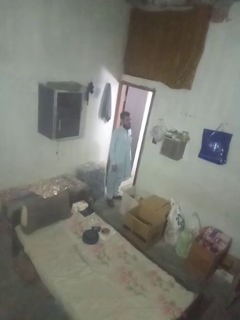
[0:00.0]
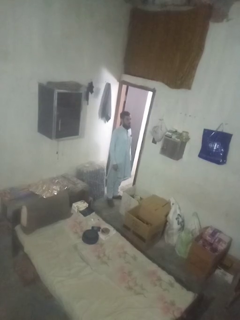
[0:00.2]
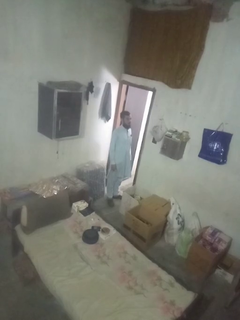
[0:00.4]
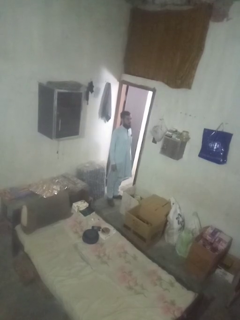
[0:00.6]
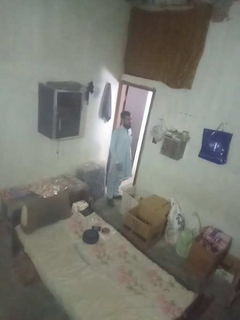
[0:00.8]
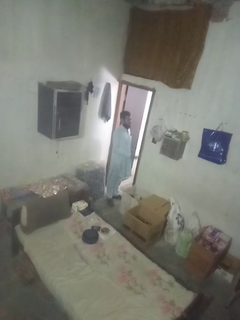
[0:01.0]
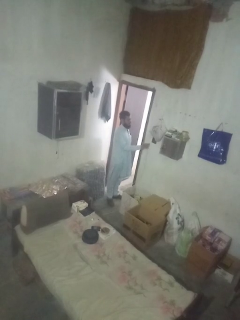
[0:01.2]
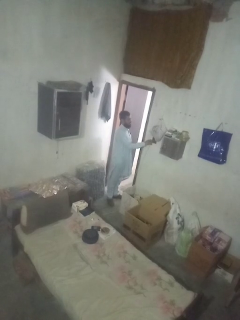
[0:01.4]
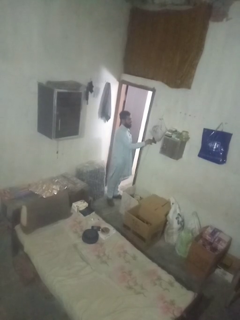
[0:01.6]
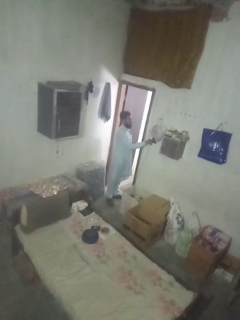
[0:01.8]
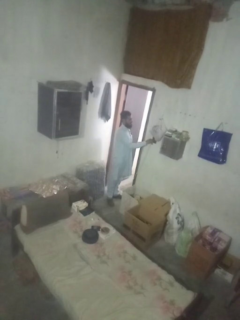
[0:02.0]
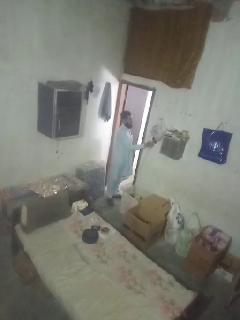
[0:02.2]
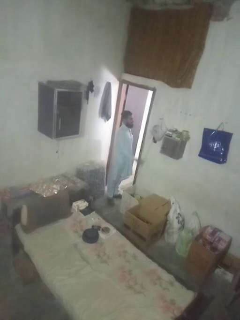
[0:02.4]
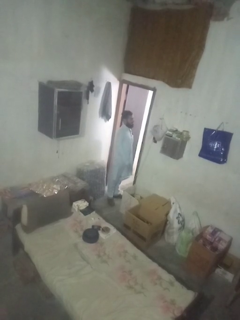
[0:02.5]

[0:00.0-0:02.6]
person plugs into electrical socket

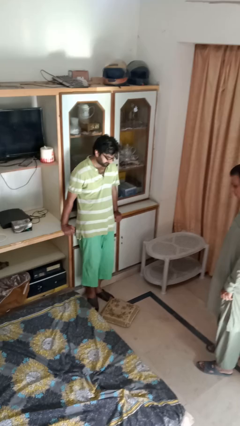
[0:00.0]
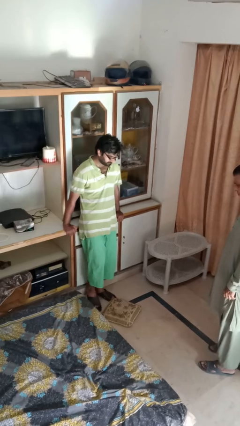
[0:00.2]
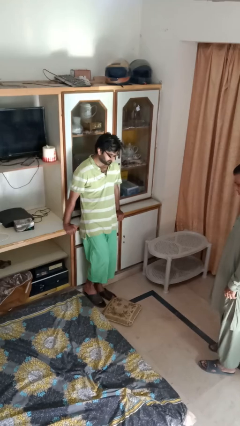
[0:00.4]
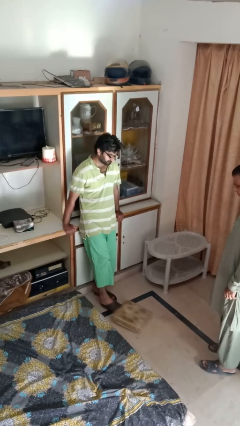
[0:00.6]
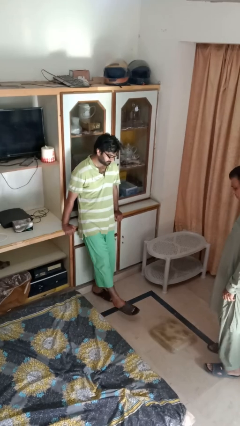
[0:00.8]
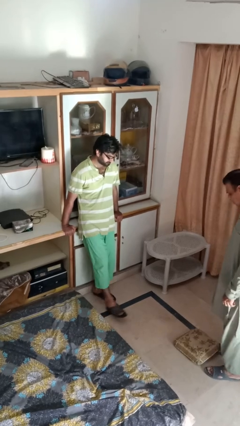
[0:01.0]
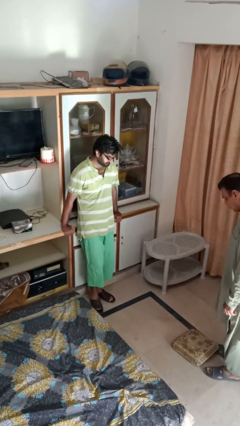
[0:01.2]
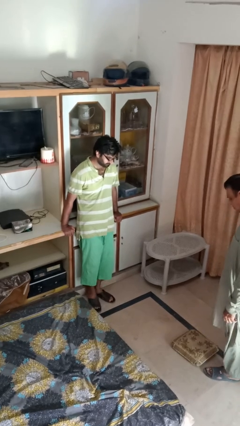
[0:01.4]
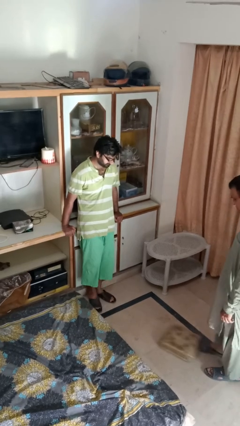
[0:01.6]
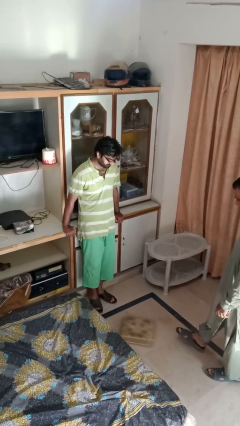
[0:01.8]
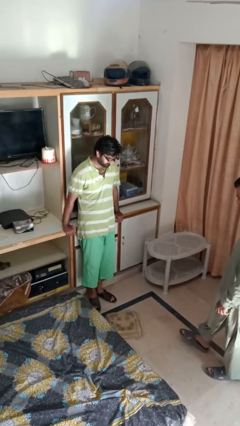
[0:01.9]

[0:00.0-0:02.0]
person kicks object to person

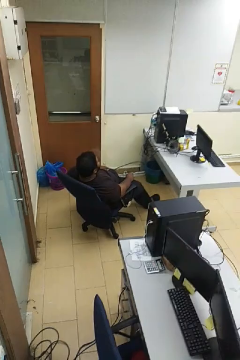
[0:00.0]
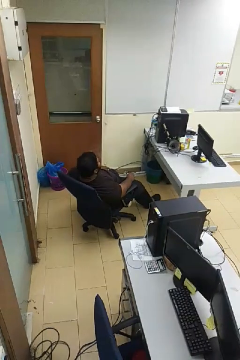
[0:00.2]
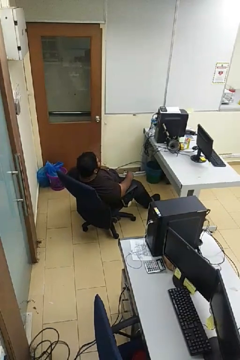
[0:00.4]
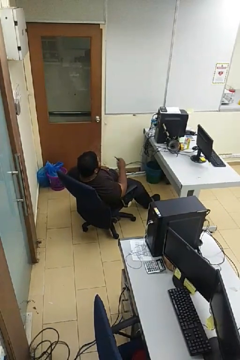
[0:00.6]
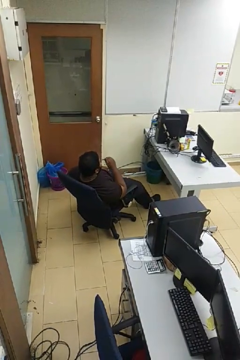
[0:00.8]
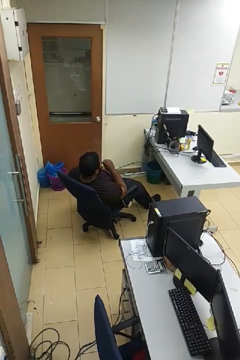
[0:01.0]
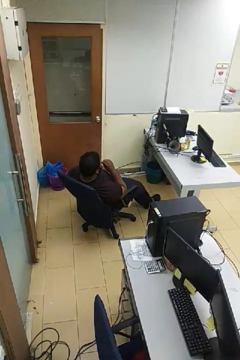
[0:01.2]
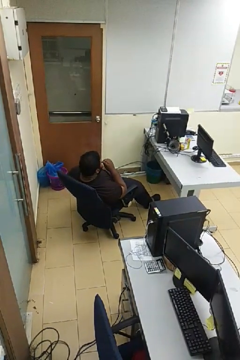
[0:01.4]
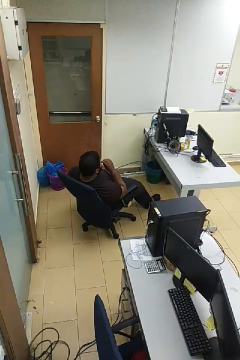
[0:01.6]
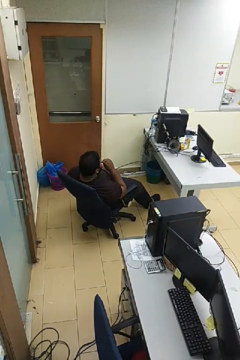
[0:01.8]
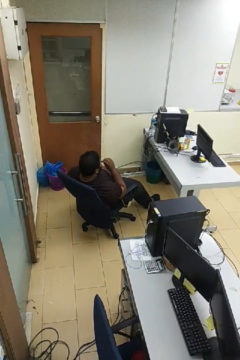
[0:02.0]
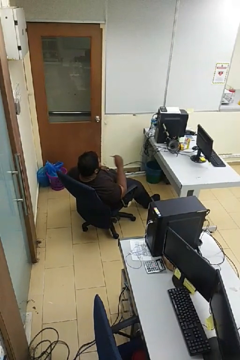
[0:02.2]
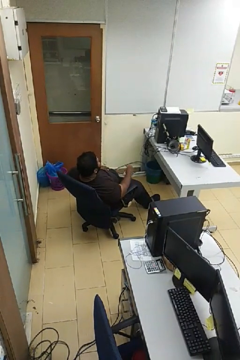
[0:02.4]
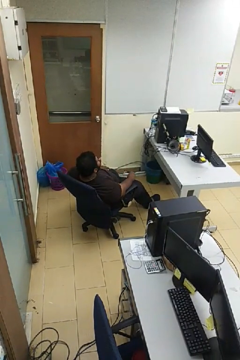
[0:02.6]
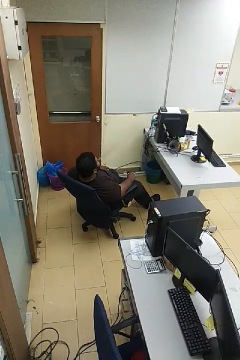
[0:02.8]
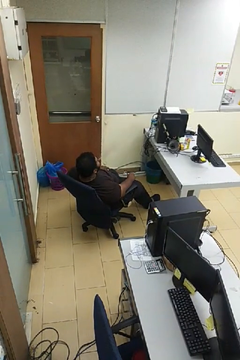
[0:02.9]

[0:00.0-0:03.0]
person vapes

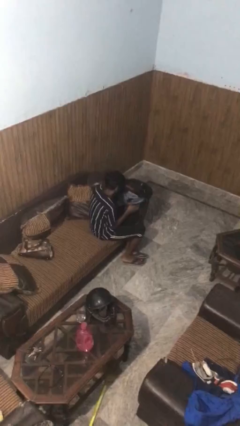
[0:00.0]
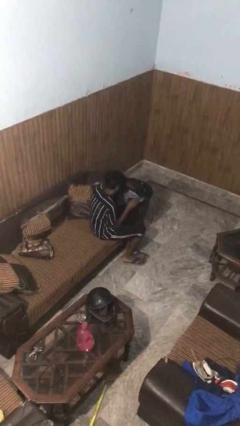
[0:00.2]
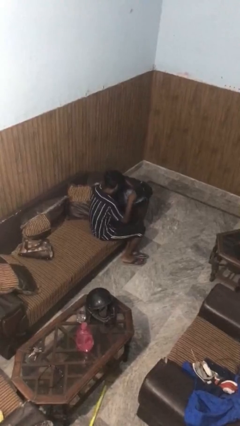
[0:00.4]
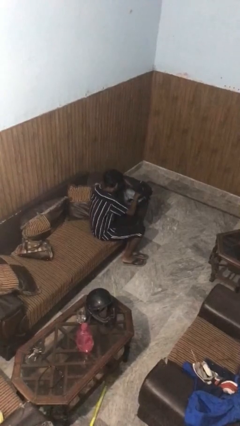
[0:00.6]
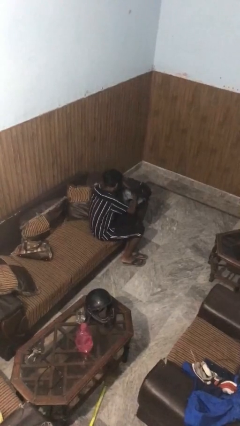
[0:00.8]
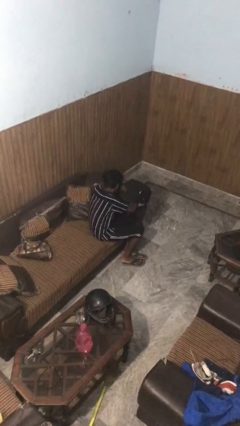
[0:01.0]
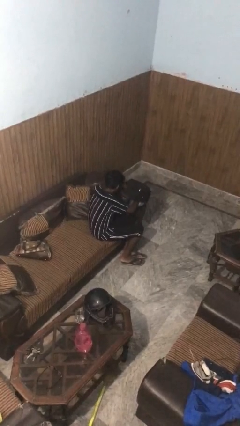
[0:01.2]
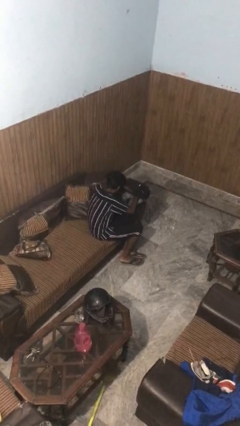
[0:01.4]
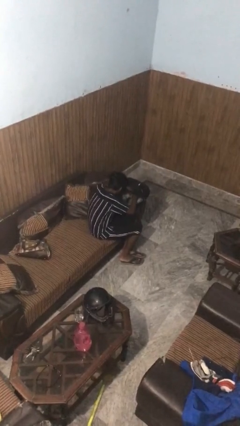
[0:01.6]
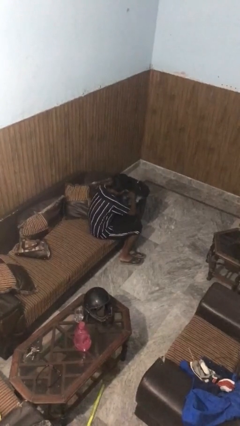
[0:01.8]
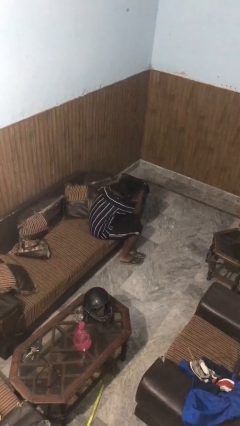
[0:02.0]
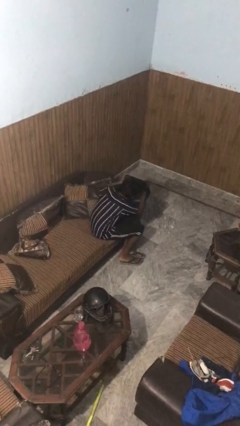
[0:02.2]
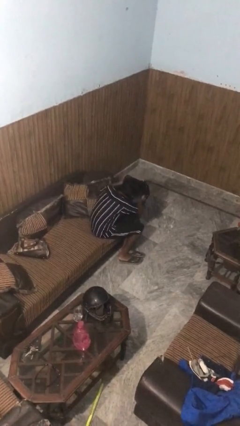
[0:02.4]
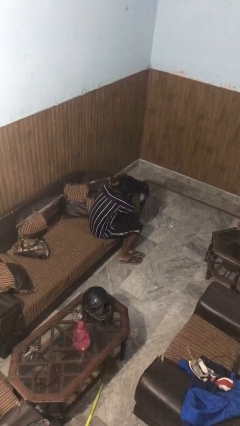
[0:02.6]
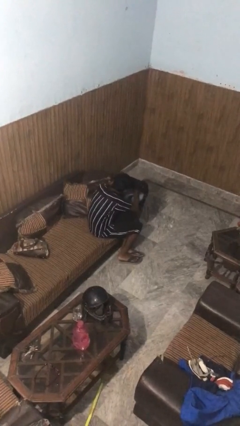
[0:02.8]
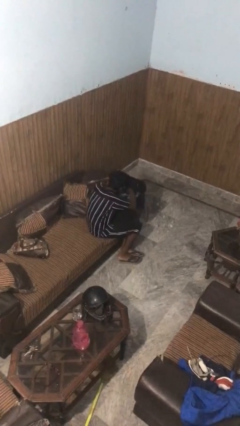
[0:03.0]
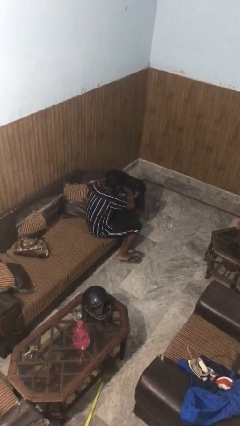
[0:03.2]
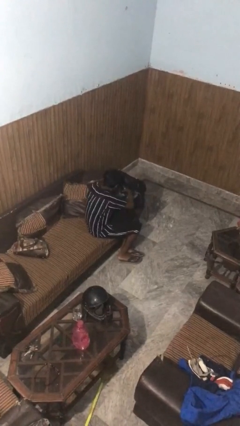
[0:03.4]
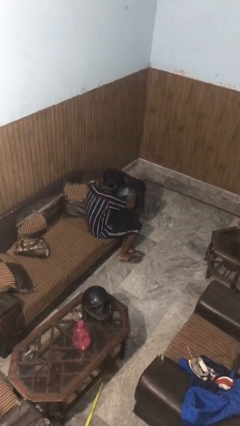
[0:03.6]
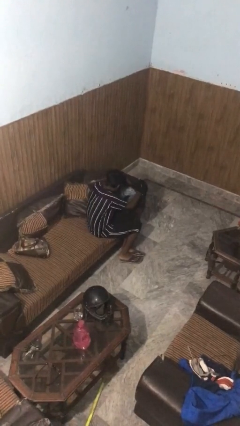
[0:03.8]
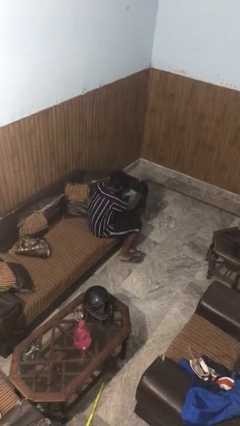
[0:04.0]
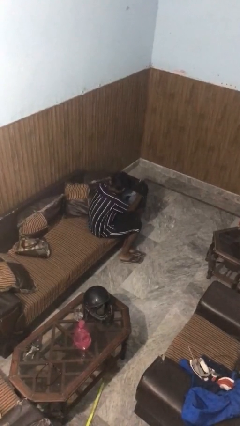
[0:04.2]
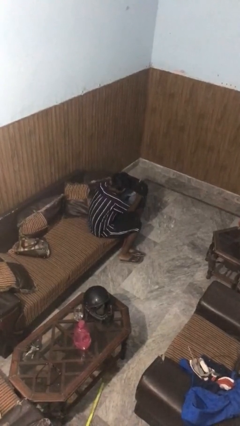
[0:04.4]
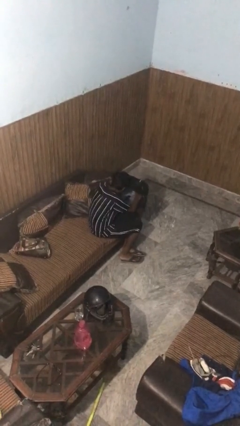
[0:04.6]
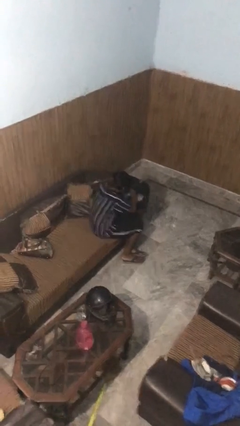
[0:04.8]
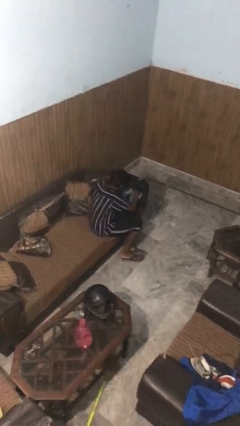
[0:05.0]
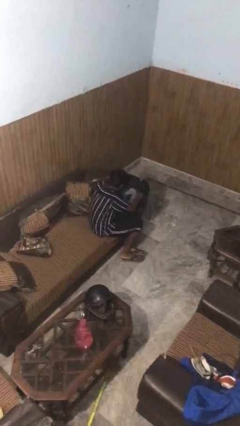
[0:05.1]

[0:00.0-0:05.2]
person searches in backpack

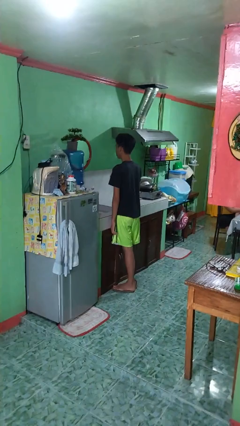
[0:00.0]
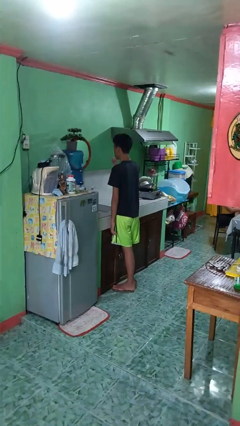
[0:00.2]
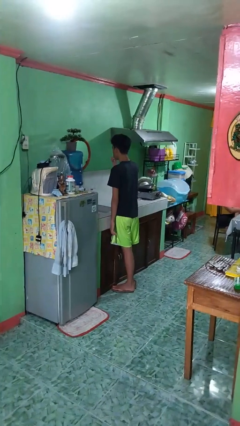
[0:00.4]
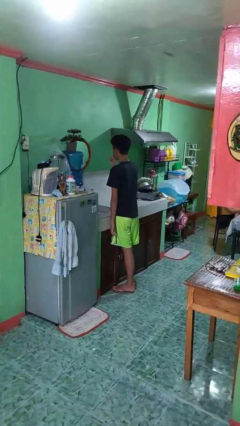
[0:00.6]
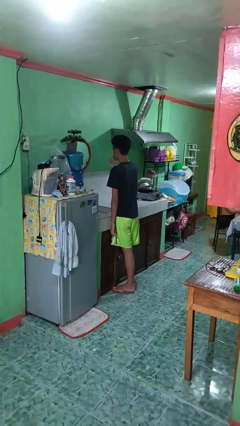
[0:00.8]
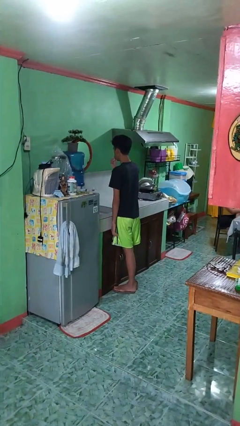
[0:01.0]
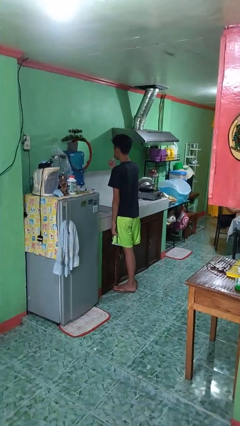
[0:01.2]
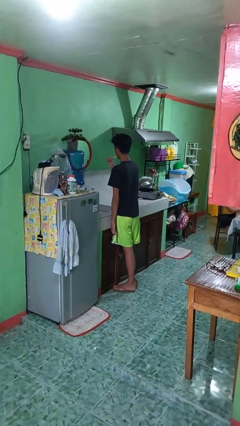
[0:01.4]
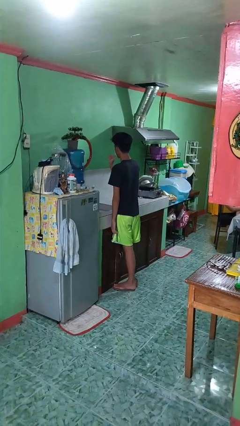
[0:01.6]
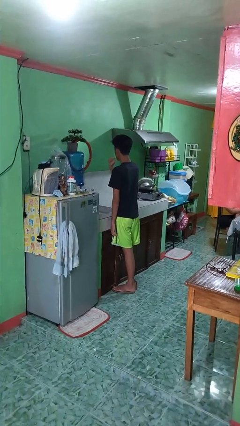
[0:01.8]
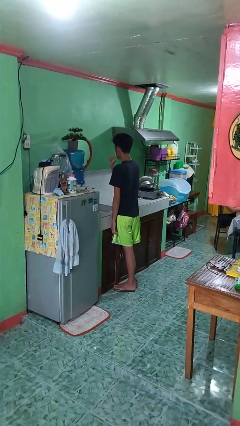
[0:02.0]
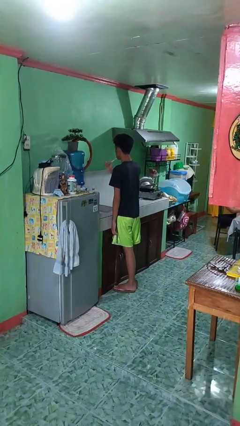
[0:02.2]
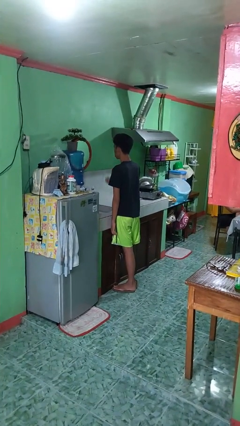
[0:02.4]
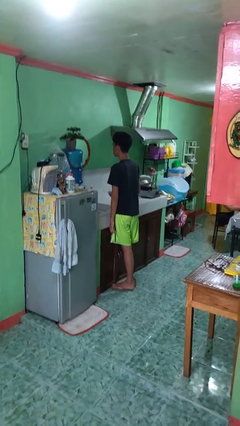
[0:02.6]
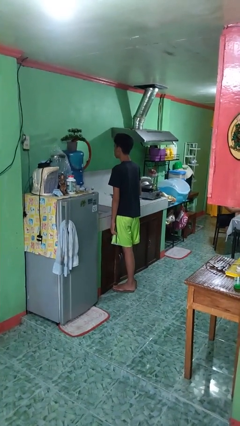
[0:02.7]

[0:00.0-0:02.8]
person brushes teeth

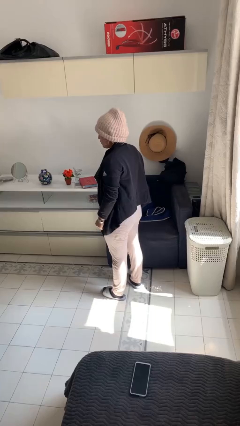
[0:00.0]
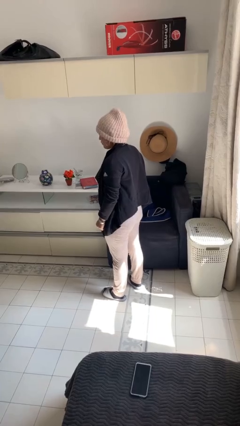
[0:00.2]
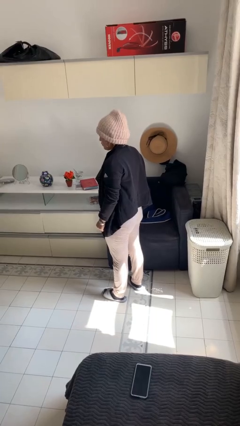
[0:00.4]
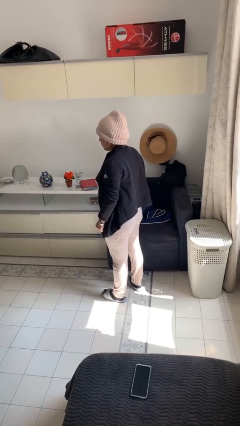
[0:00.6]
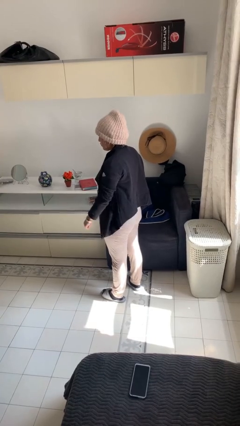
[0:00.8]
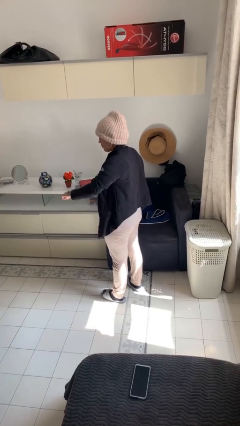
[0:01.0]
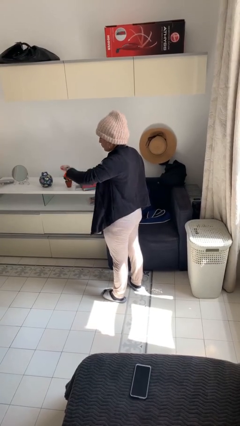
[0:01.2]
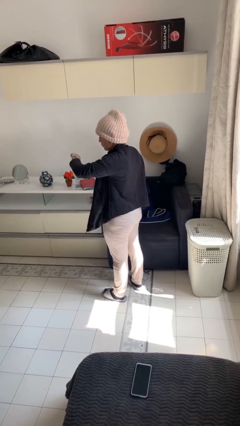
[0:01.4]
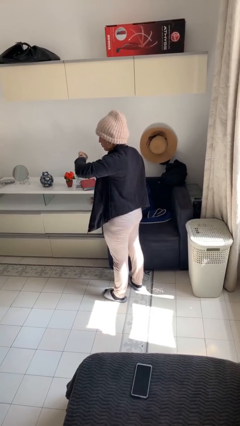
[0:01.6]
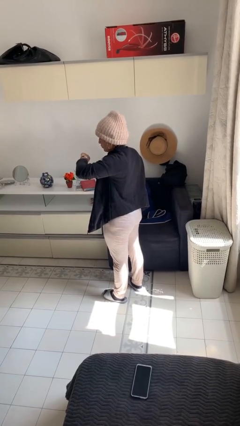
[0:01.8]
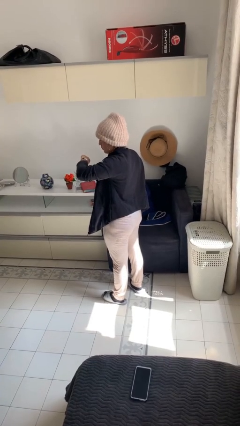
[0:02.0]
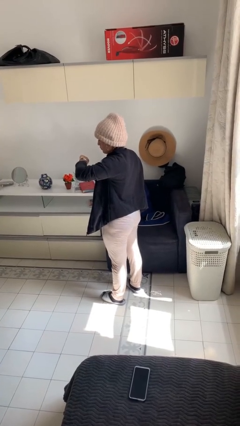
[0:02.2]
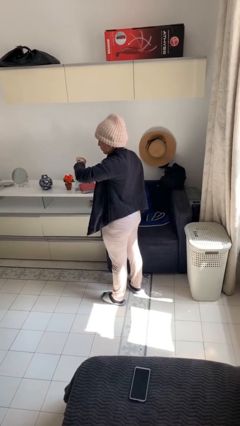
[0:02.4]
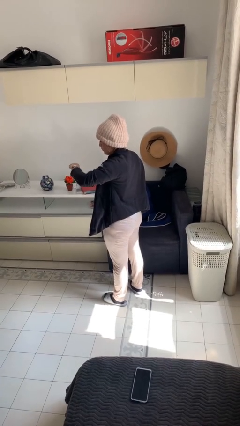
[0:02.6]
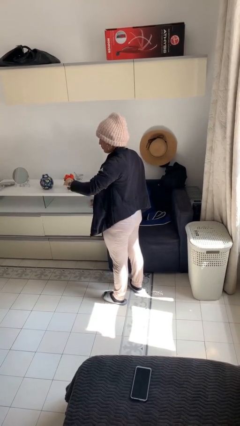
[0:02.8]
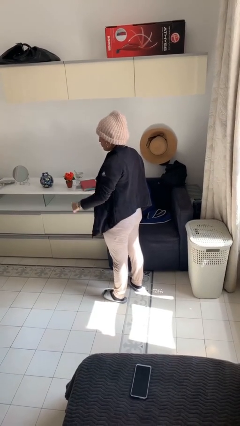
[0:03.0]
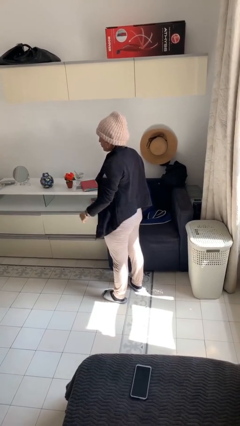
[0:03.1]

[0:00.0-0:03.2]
person looks at wristwatch
